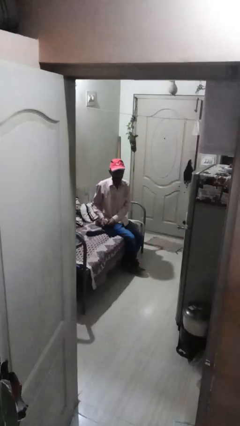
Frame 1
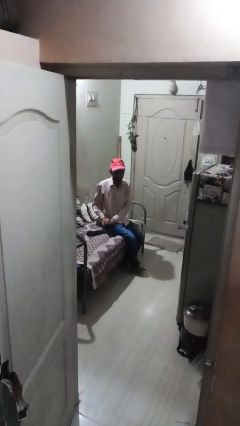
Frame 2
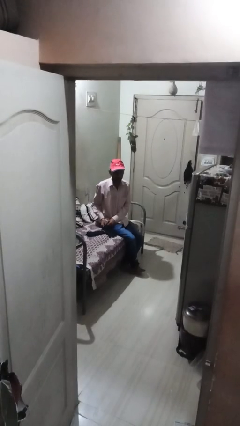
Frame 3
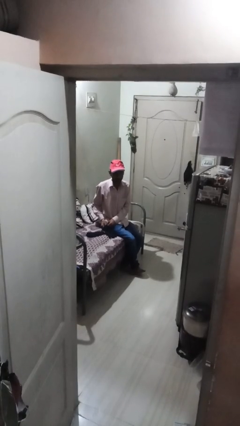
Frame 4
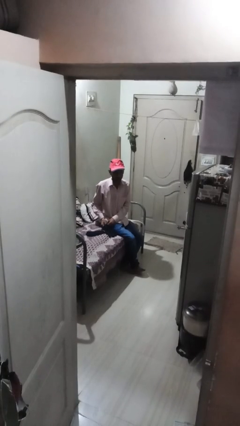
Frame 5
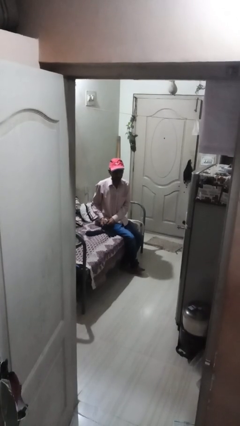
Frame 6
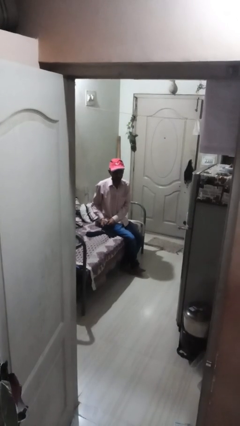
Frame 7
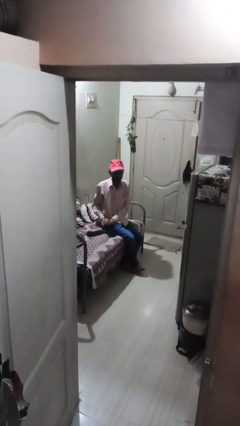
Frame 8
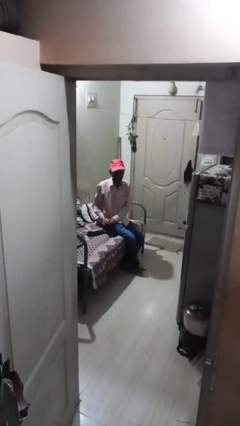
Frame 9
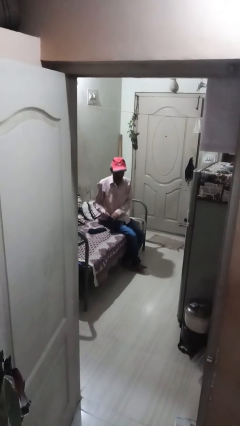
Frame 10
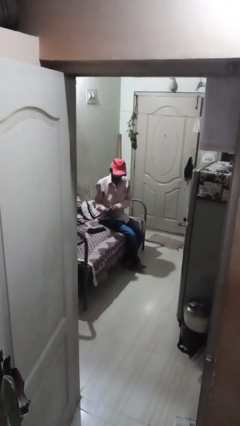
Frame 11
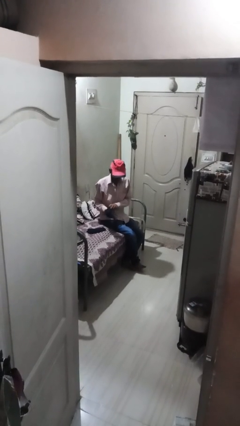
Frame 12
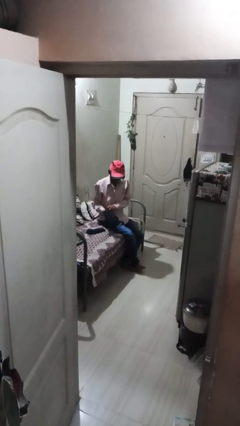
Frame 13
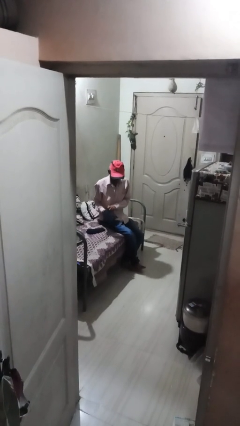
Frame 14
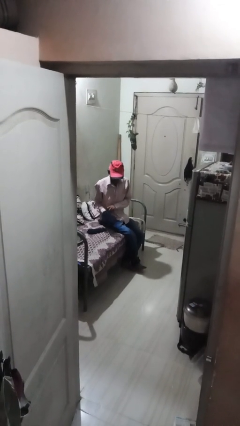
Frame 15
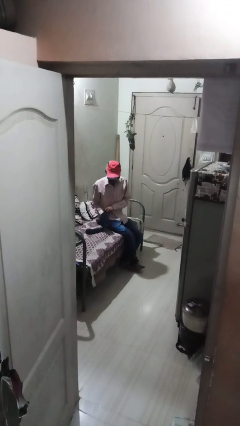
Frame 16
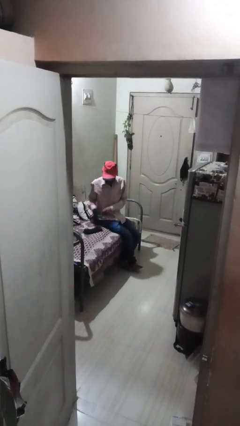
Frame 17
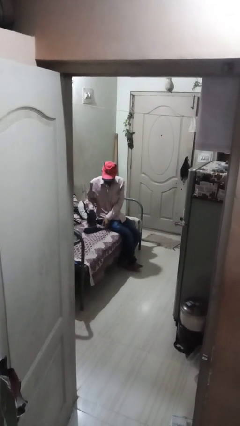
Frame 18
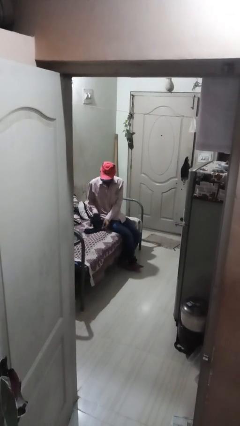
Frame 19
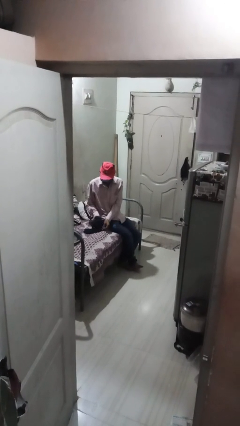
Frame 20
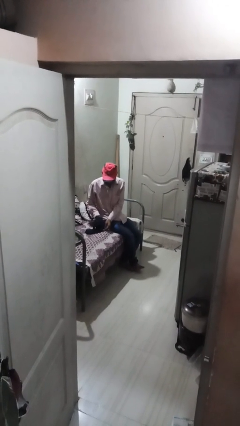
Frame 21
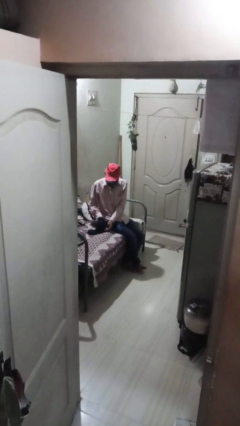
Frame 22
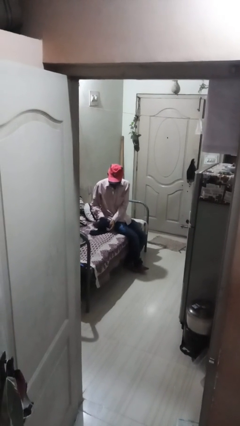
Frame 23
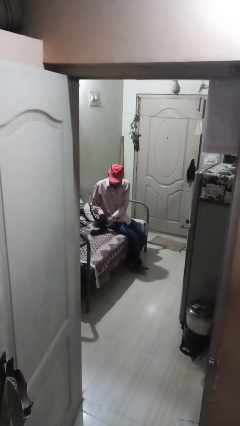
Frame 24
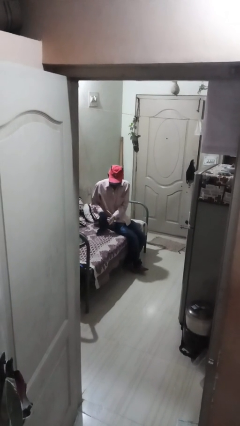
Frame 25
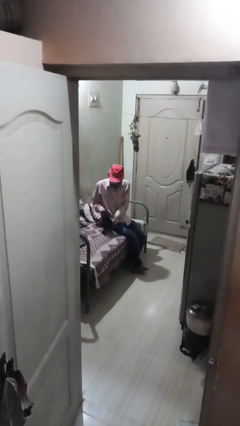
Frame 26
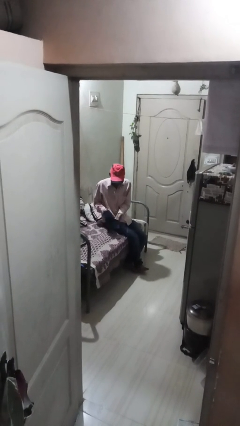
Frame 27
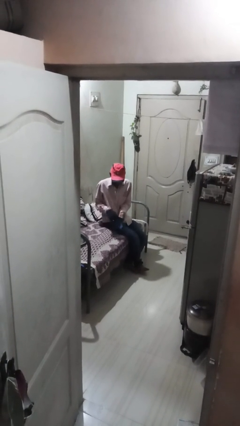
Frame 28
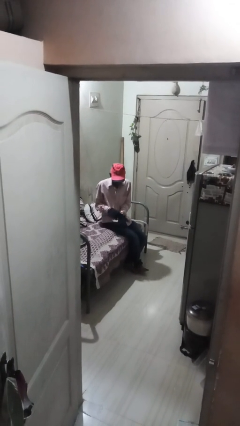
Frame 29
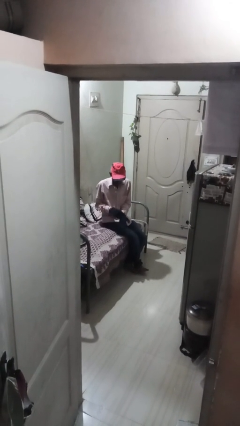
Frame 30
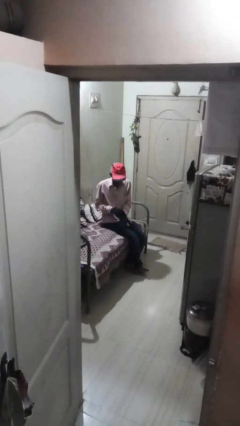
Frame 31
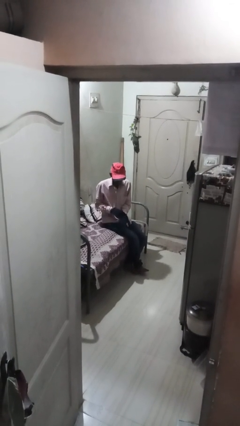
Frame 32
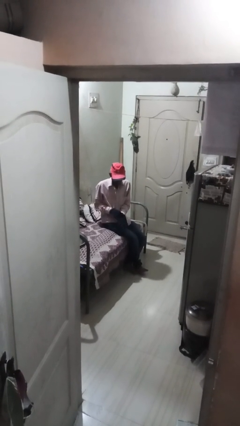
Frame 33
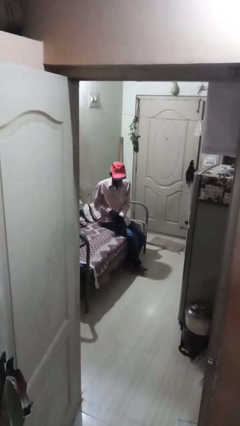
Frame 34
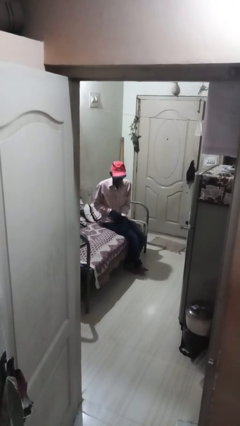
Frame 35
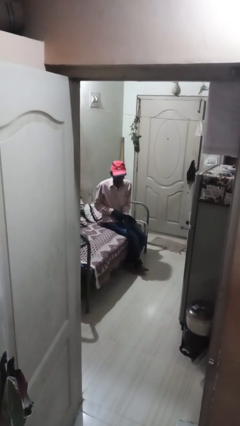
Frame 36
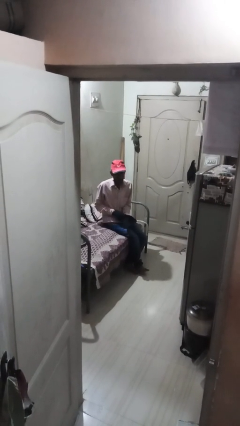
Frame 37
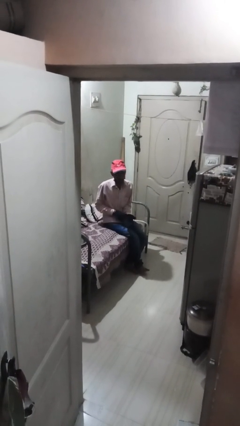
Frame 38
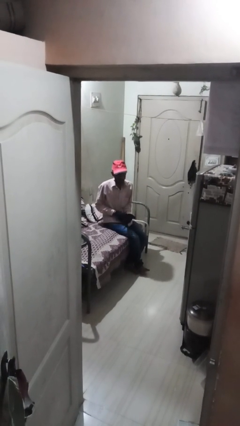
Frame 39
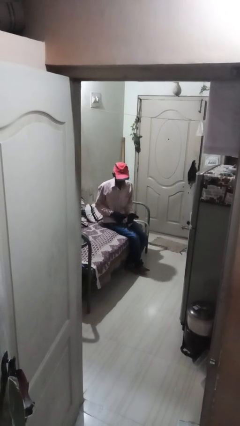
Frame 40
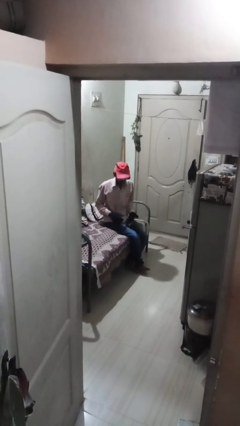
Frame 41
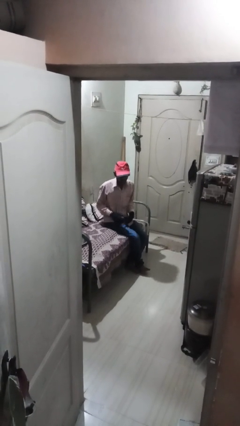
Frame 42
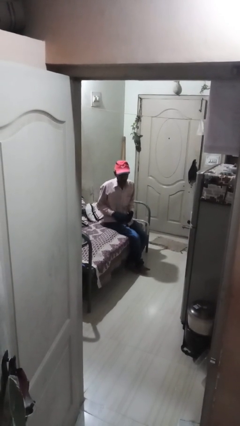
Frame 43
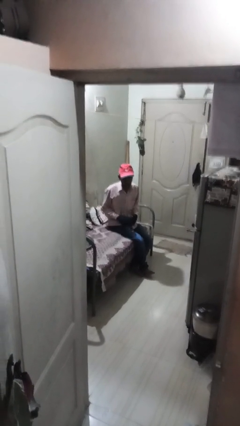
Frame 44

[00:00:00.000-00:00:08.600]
person puts on gloves

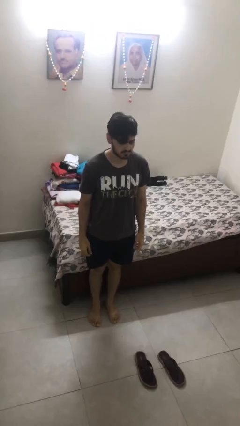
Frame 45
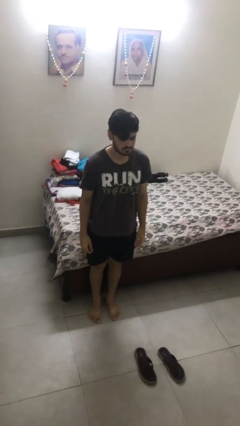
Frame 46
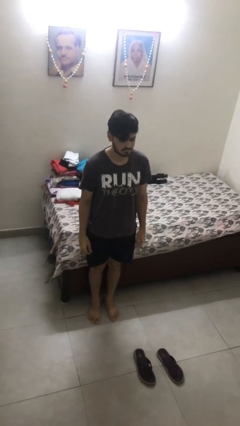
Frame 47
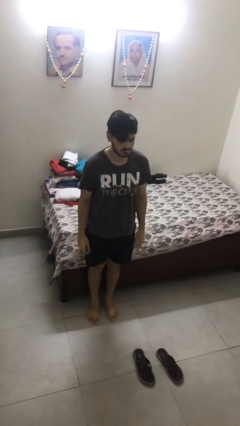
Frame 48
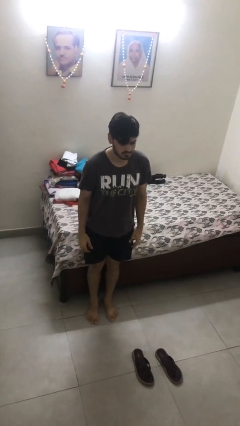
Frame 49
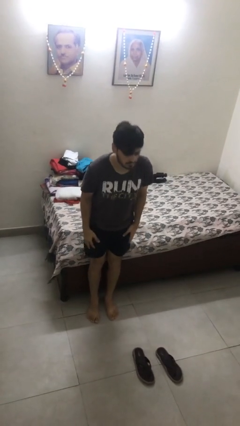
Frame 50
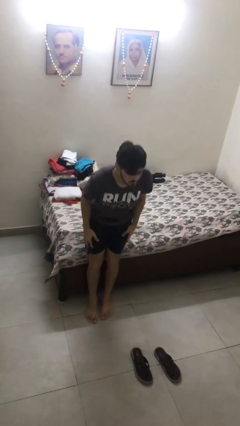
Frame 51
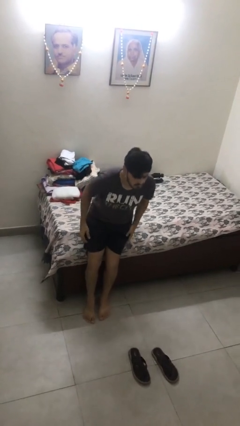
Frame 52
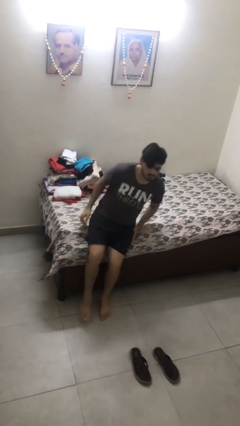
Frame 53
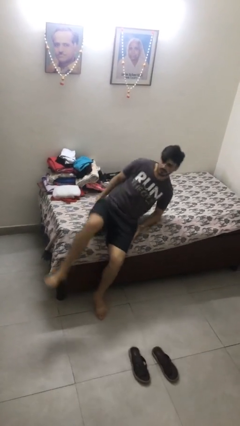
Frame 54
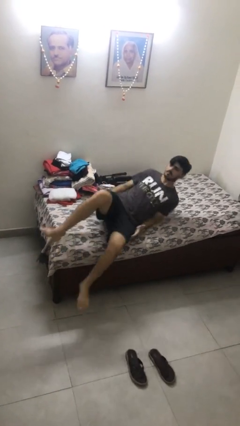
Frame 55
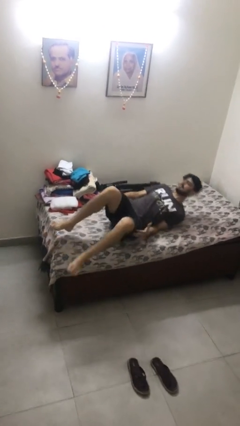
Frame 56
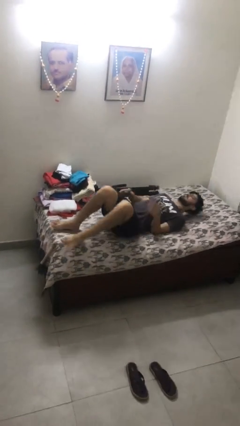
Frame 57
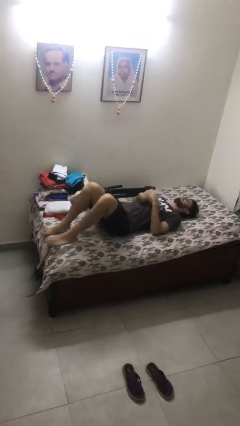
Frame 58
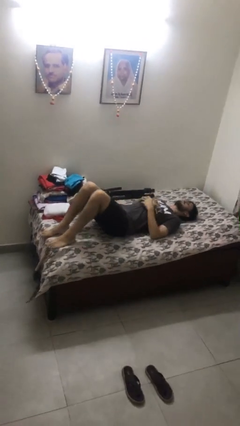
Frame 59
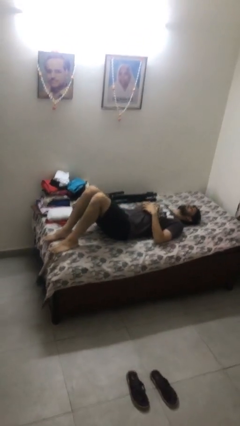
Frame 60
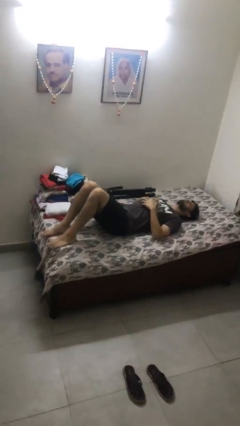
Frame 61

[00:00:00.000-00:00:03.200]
person lies down on bed

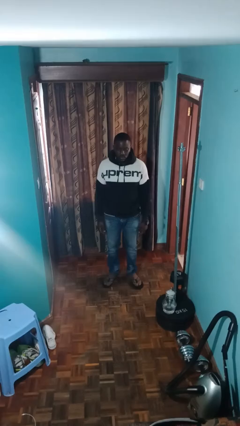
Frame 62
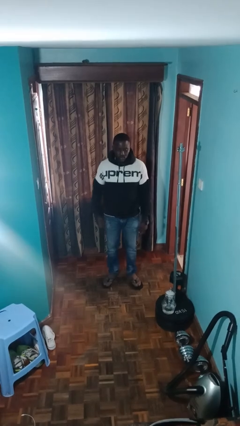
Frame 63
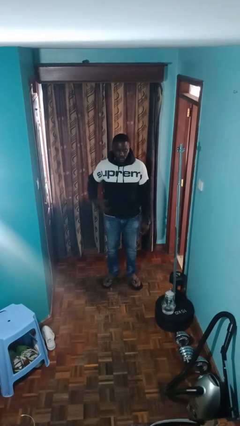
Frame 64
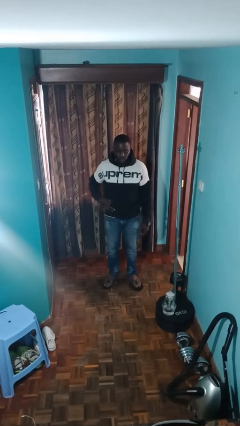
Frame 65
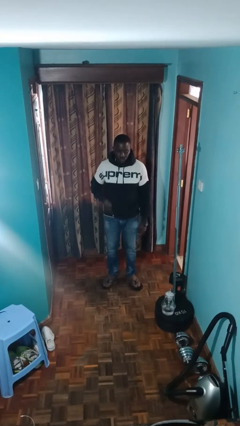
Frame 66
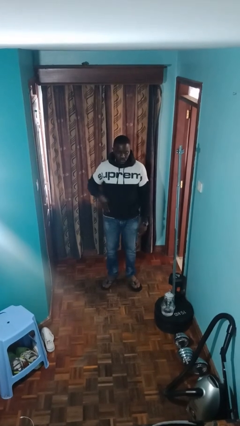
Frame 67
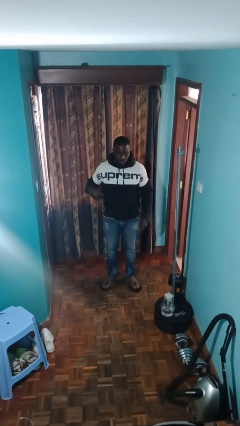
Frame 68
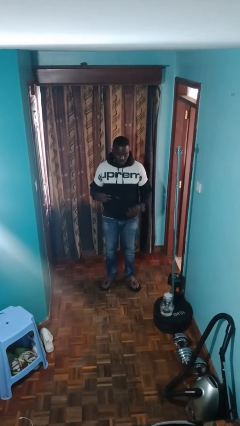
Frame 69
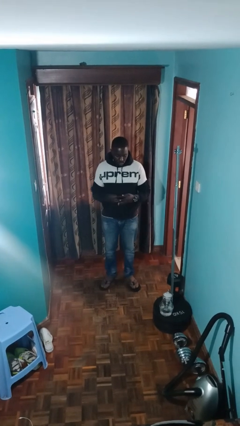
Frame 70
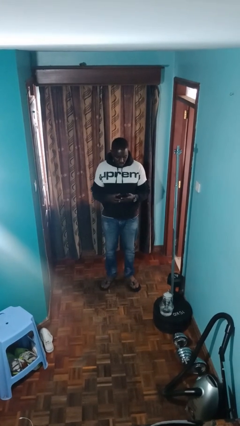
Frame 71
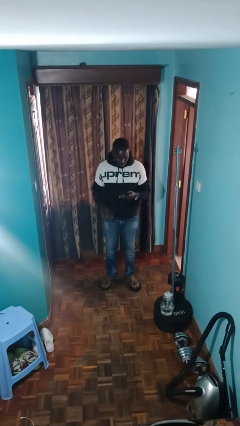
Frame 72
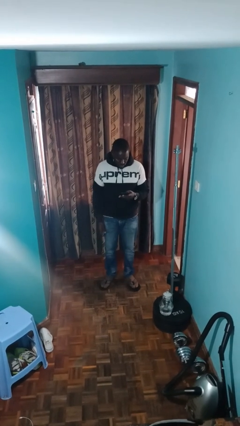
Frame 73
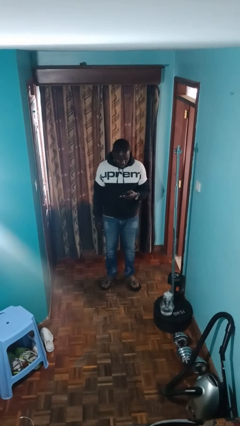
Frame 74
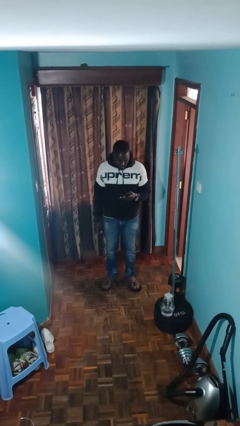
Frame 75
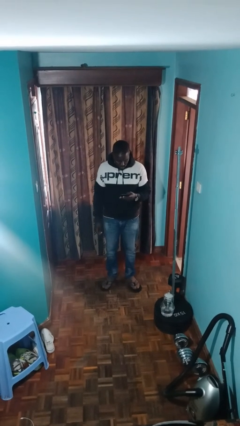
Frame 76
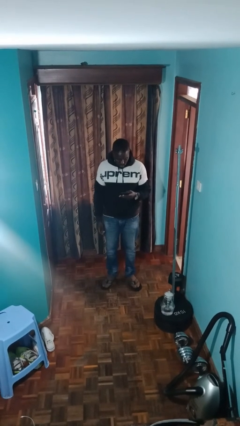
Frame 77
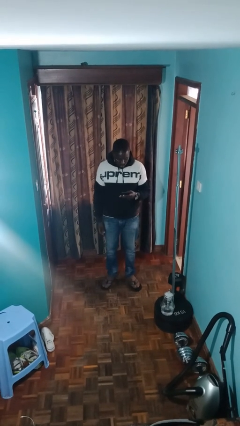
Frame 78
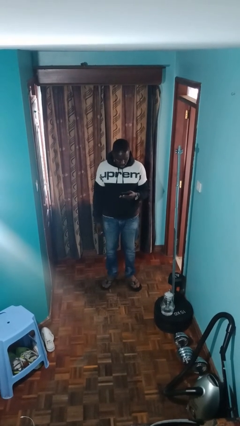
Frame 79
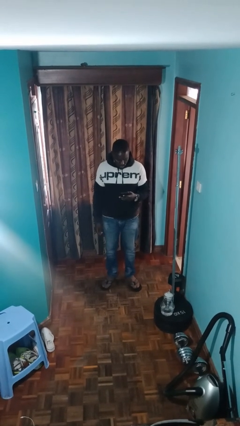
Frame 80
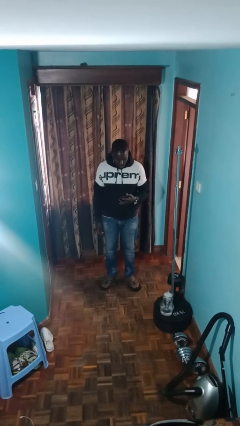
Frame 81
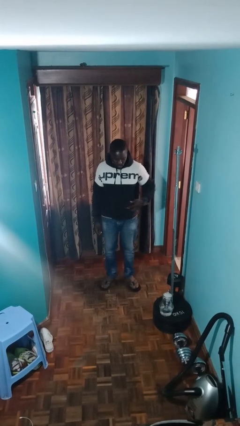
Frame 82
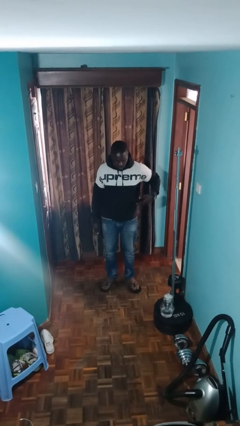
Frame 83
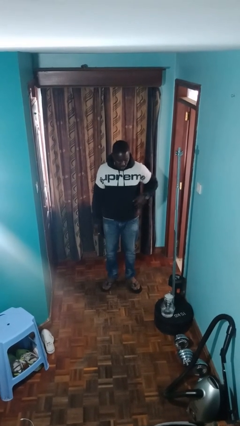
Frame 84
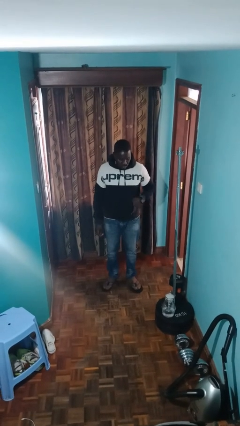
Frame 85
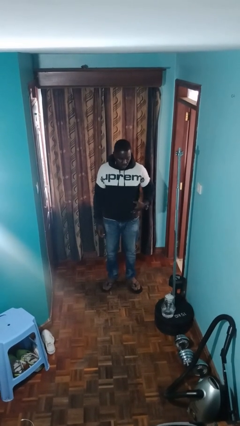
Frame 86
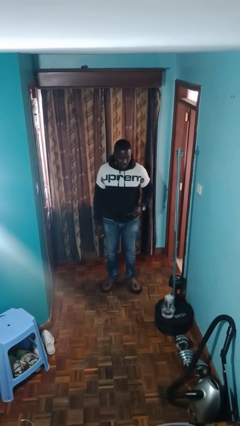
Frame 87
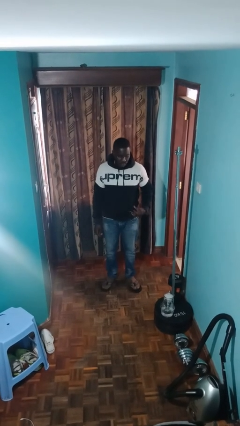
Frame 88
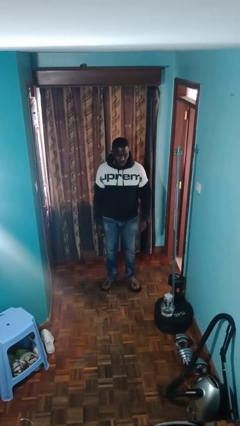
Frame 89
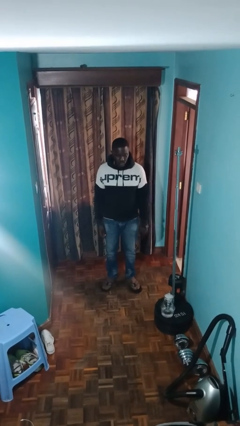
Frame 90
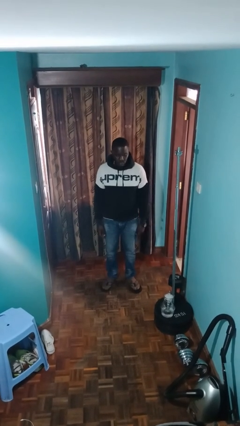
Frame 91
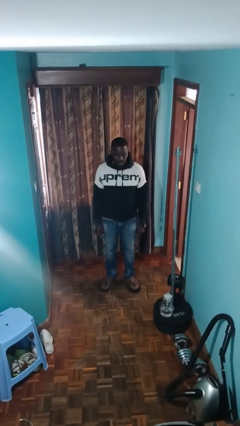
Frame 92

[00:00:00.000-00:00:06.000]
person takes phone from pocket

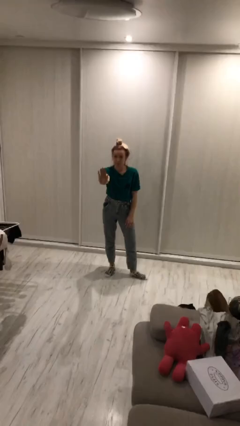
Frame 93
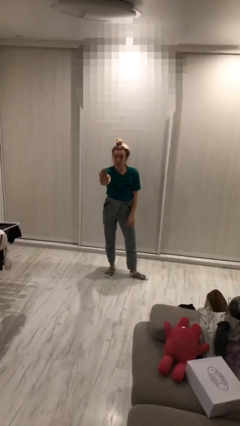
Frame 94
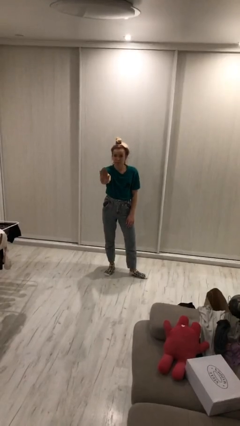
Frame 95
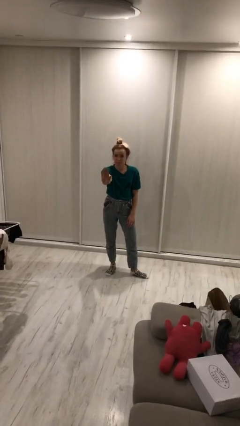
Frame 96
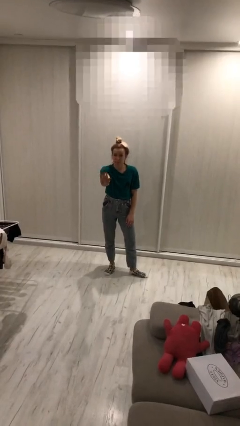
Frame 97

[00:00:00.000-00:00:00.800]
person gestures stop
